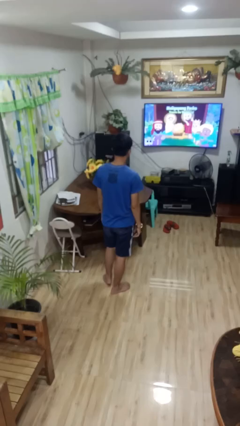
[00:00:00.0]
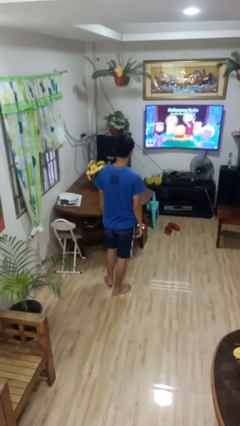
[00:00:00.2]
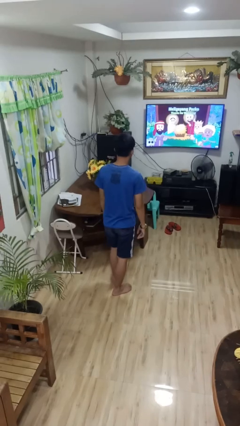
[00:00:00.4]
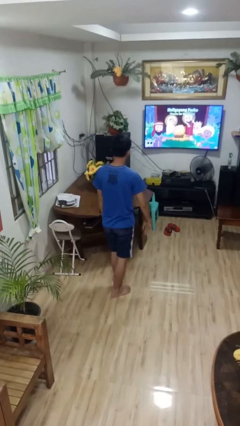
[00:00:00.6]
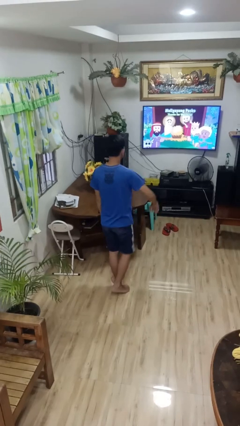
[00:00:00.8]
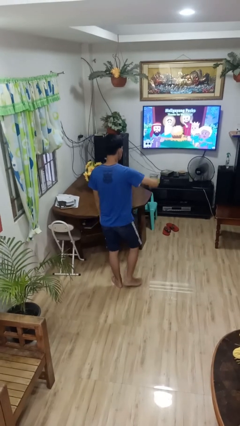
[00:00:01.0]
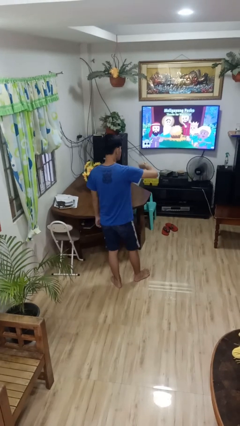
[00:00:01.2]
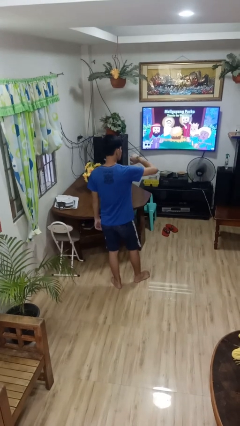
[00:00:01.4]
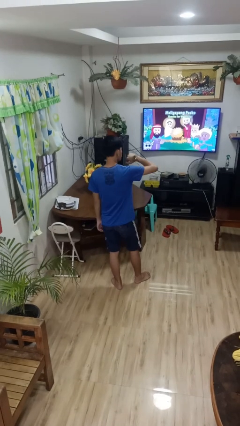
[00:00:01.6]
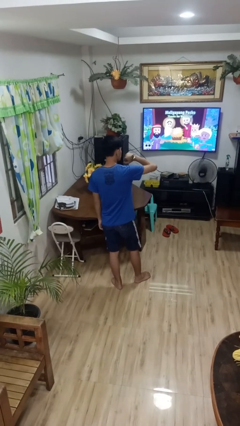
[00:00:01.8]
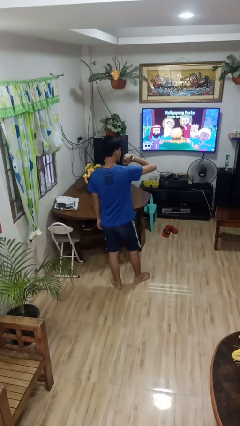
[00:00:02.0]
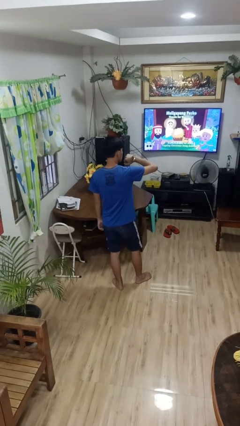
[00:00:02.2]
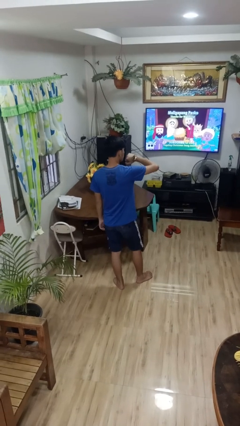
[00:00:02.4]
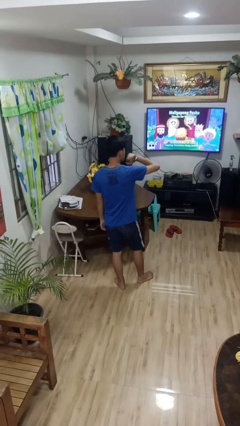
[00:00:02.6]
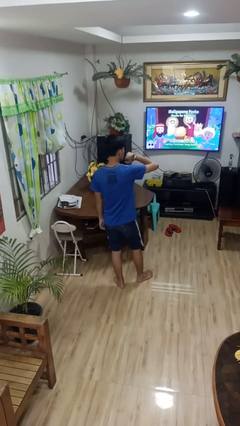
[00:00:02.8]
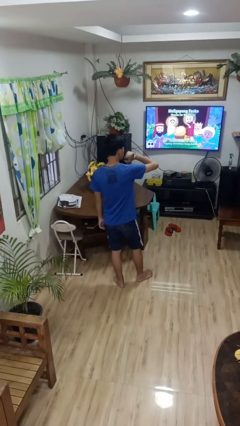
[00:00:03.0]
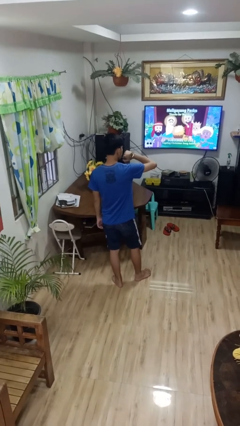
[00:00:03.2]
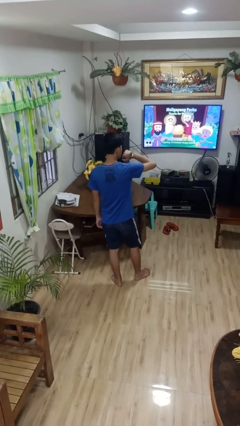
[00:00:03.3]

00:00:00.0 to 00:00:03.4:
person looks at wristwatch

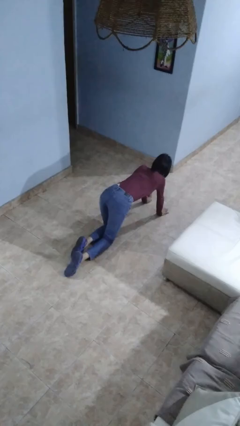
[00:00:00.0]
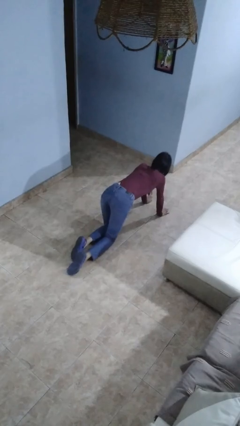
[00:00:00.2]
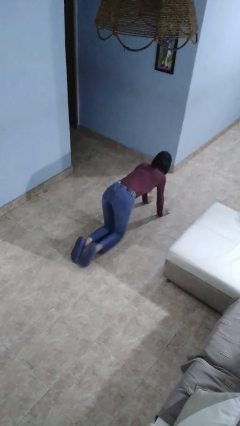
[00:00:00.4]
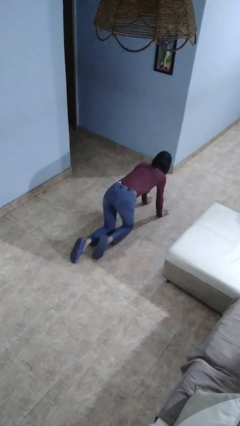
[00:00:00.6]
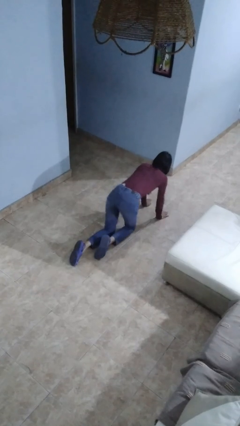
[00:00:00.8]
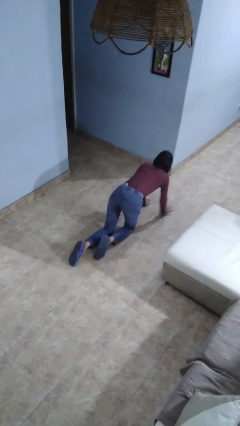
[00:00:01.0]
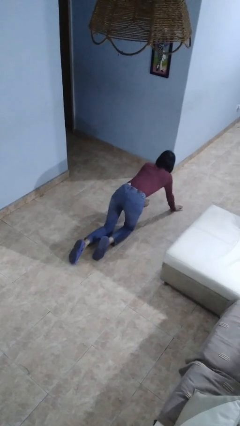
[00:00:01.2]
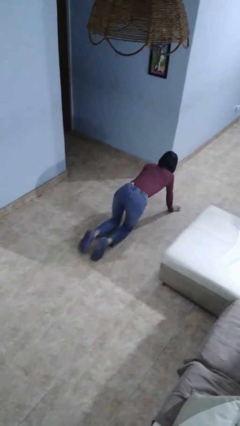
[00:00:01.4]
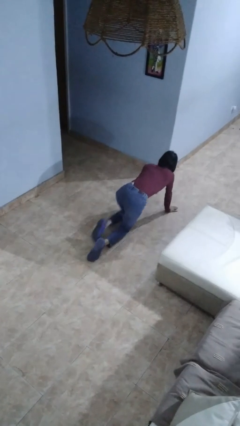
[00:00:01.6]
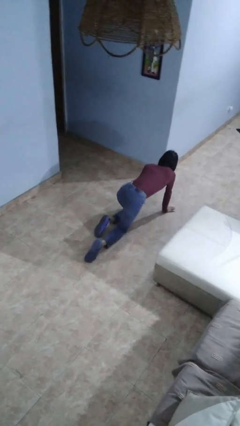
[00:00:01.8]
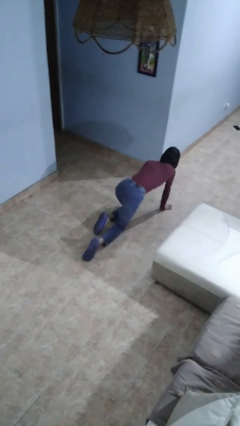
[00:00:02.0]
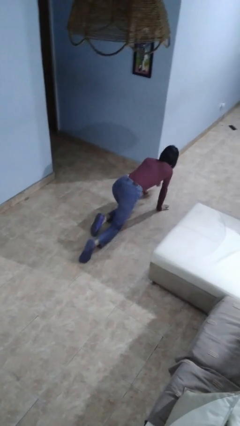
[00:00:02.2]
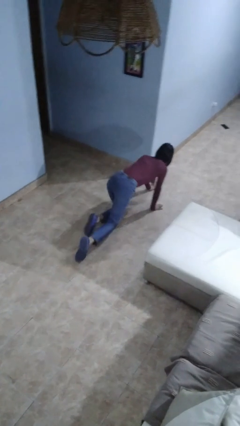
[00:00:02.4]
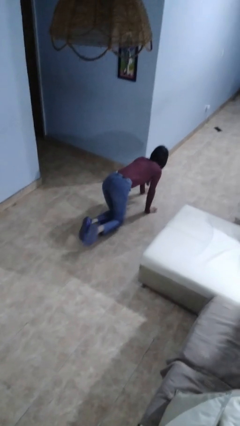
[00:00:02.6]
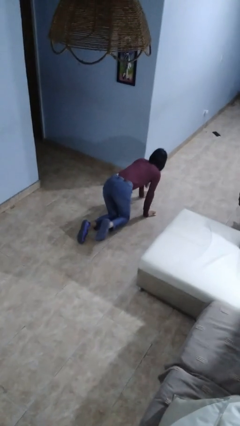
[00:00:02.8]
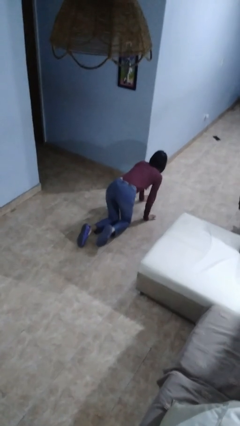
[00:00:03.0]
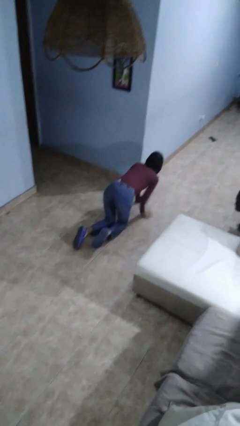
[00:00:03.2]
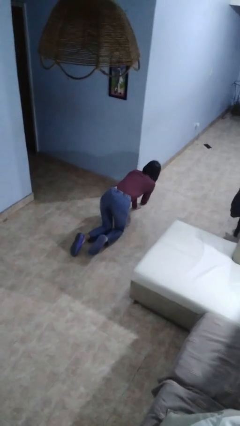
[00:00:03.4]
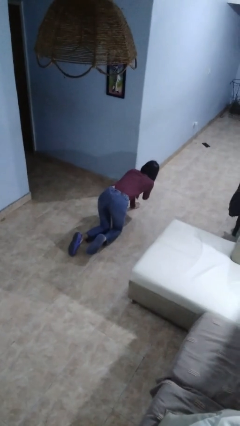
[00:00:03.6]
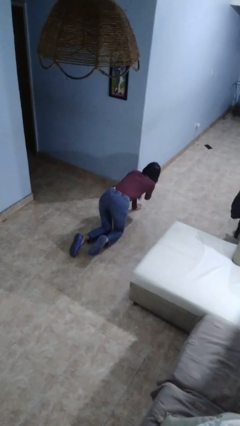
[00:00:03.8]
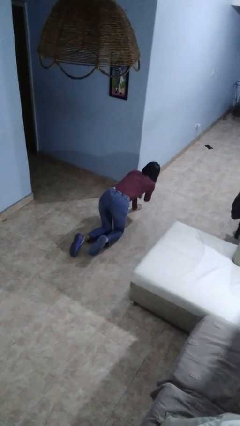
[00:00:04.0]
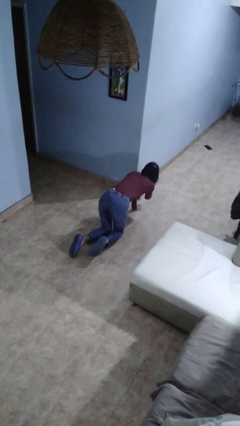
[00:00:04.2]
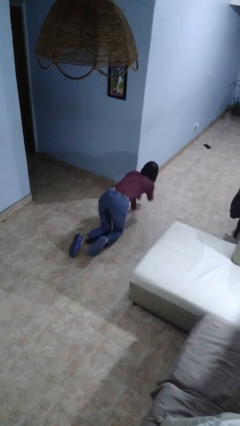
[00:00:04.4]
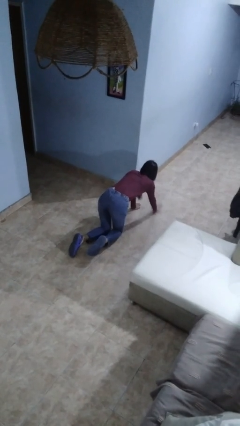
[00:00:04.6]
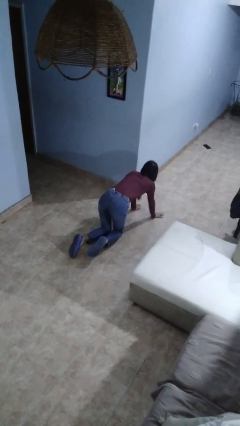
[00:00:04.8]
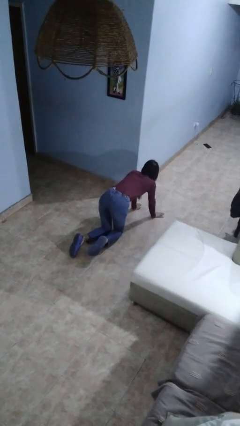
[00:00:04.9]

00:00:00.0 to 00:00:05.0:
person crawls

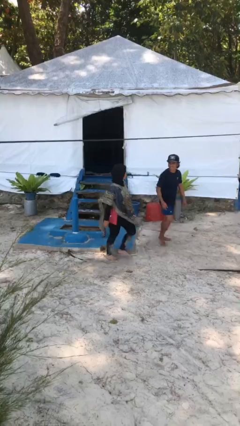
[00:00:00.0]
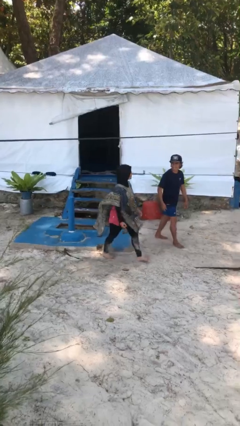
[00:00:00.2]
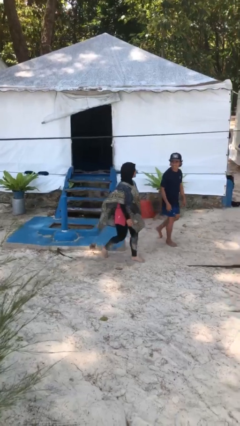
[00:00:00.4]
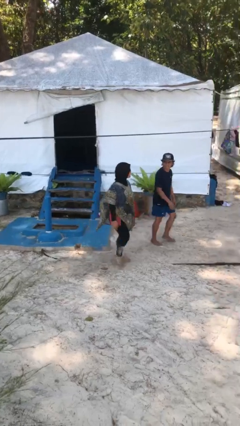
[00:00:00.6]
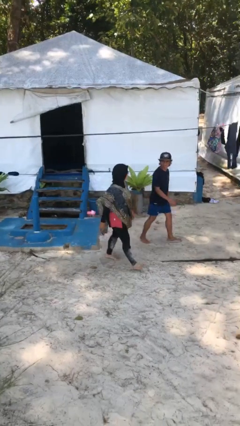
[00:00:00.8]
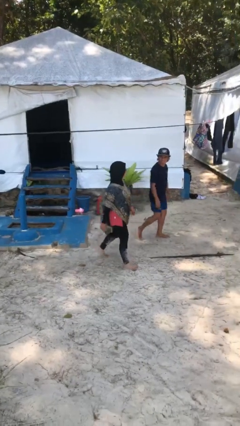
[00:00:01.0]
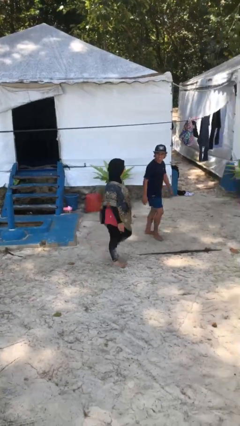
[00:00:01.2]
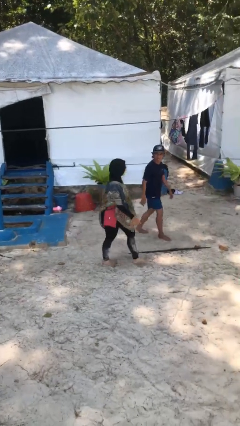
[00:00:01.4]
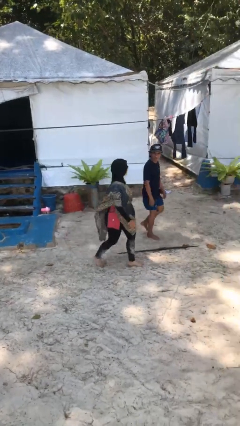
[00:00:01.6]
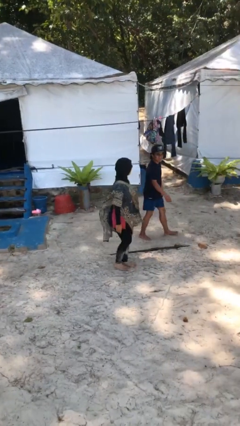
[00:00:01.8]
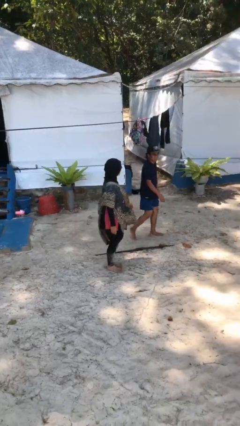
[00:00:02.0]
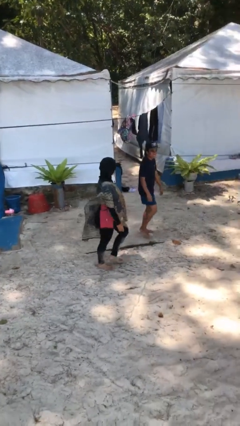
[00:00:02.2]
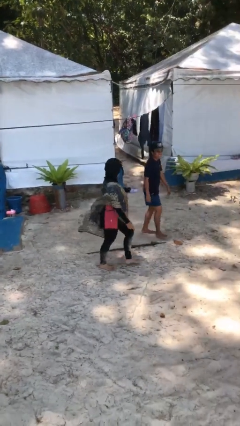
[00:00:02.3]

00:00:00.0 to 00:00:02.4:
person talks to person

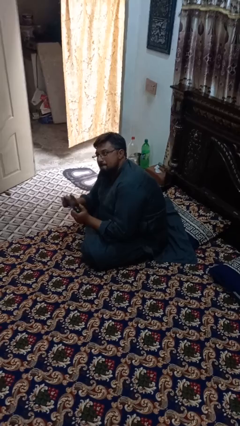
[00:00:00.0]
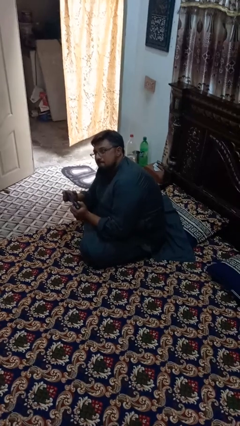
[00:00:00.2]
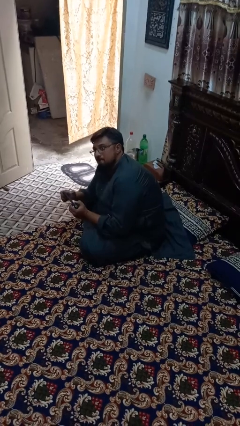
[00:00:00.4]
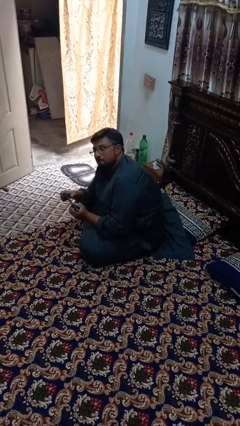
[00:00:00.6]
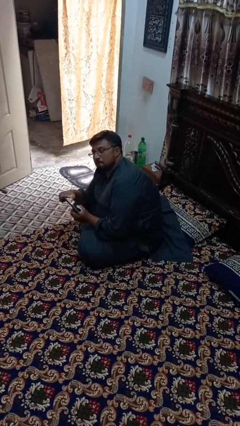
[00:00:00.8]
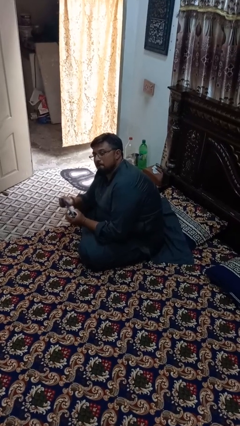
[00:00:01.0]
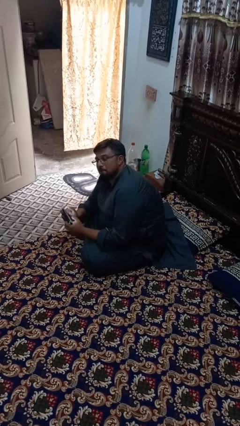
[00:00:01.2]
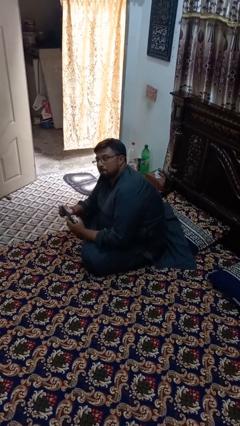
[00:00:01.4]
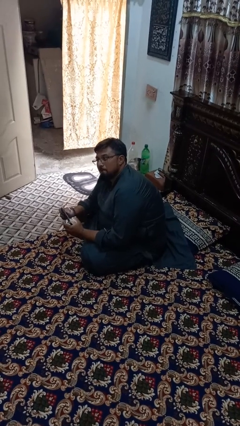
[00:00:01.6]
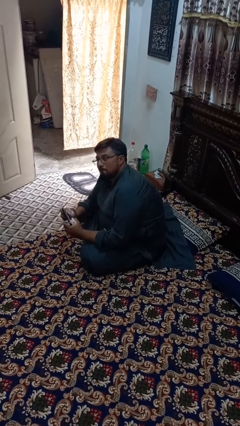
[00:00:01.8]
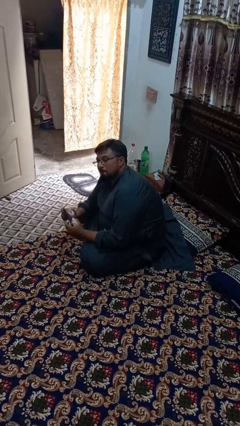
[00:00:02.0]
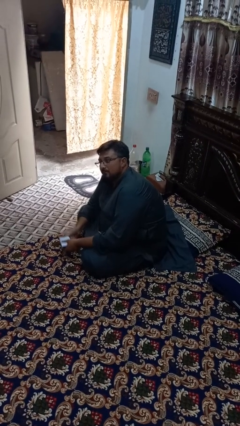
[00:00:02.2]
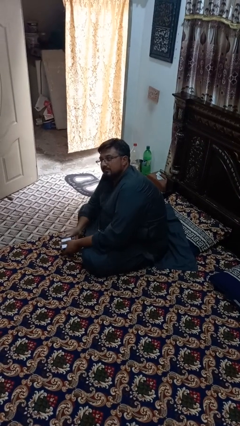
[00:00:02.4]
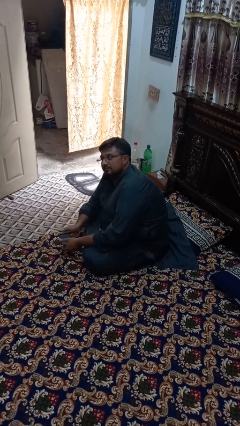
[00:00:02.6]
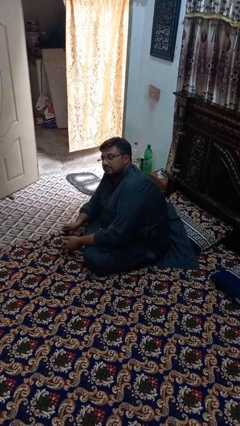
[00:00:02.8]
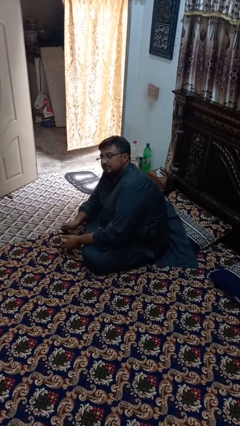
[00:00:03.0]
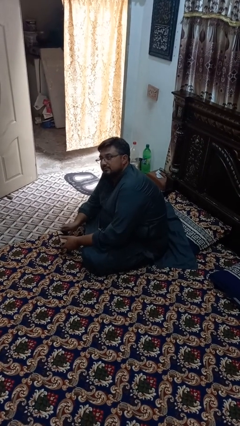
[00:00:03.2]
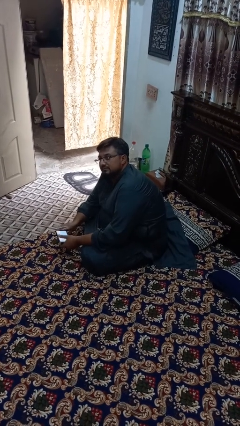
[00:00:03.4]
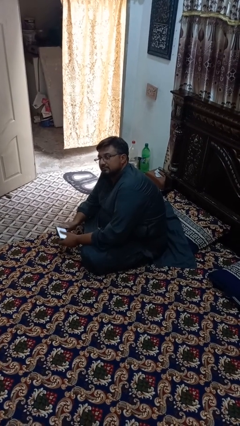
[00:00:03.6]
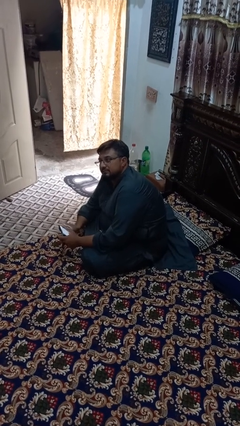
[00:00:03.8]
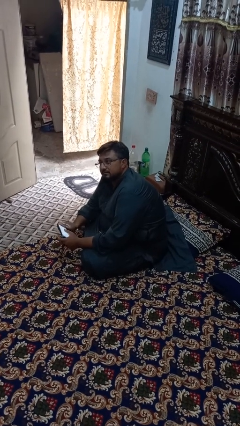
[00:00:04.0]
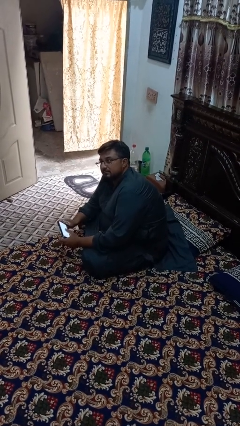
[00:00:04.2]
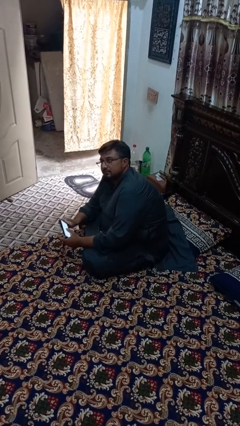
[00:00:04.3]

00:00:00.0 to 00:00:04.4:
person interacts with handheld game

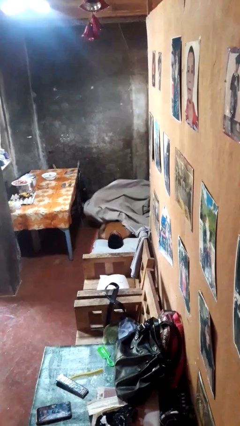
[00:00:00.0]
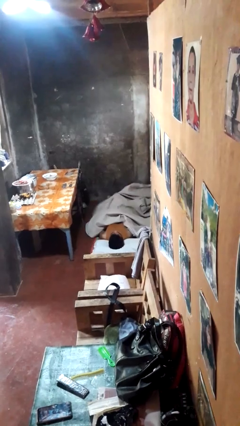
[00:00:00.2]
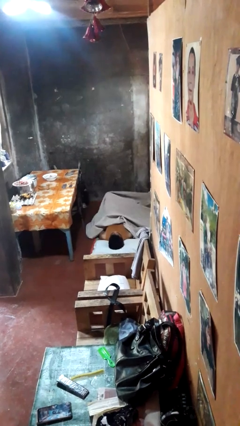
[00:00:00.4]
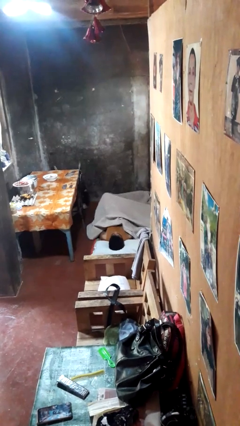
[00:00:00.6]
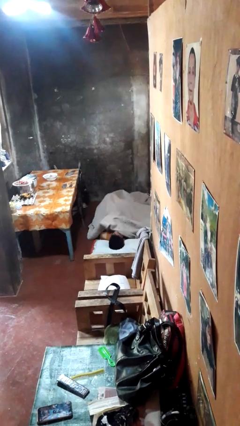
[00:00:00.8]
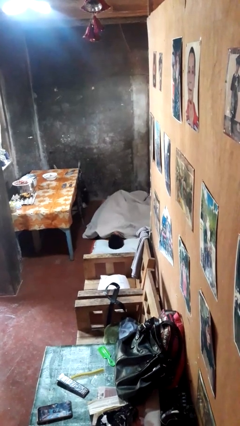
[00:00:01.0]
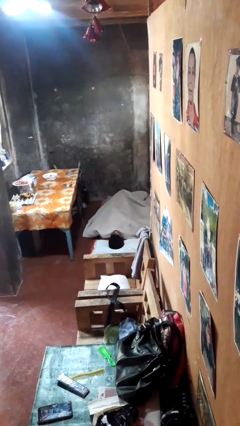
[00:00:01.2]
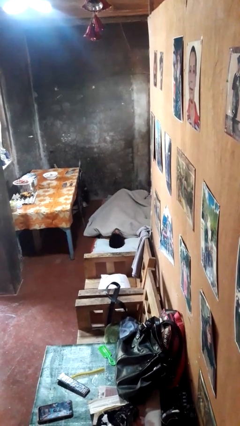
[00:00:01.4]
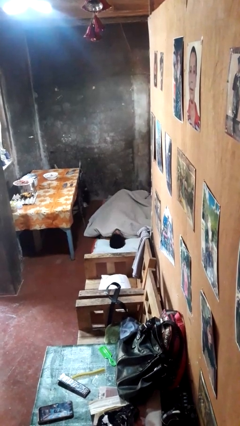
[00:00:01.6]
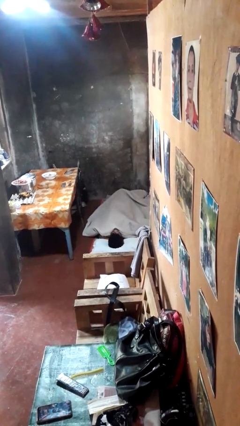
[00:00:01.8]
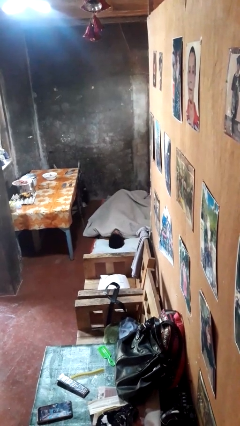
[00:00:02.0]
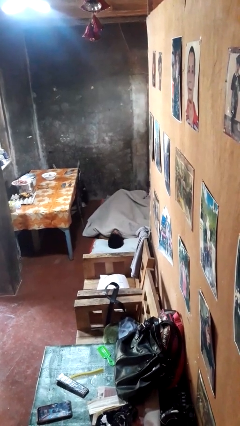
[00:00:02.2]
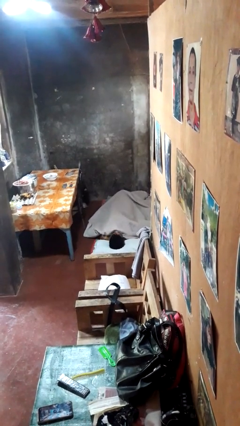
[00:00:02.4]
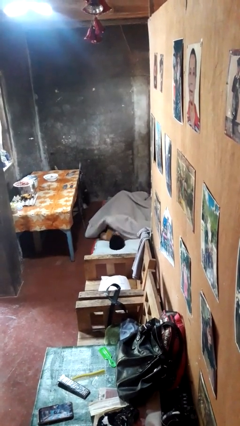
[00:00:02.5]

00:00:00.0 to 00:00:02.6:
person covers with bedsheets
